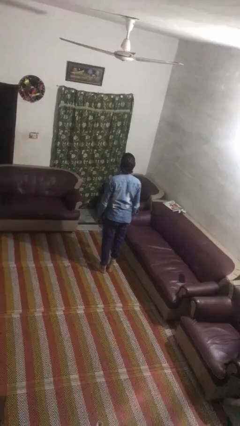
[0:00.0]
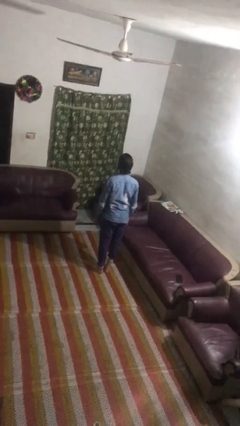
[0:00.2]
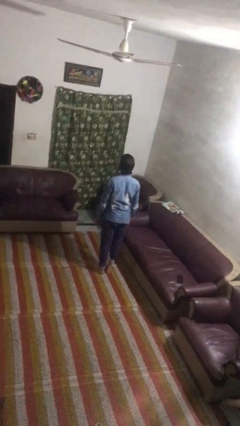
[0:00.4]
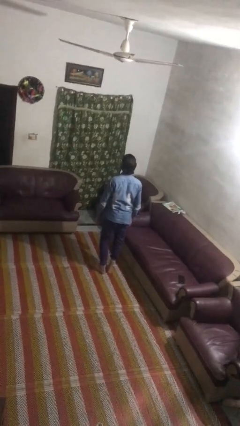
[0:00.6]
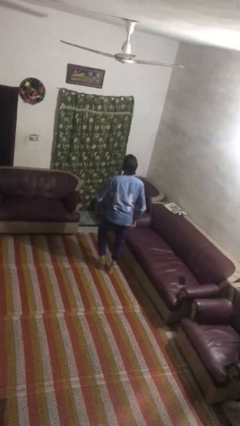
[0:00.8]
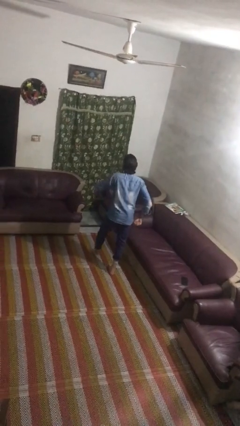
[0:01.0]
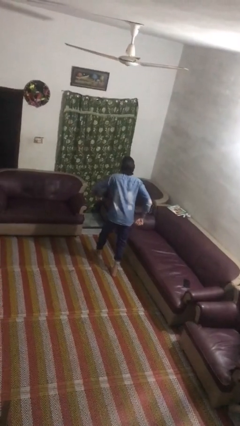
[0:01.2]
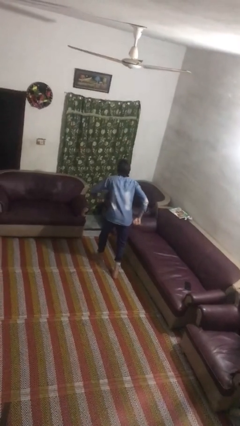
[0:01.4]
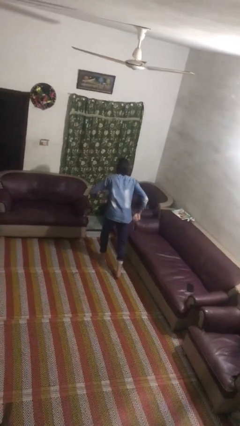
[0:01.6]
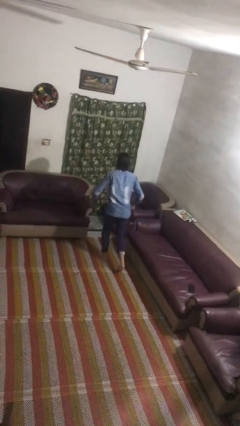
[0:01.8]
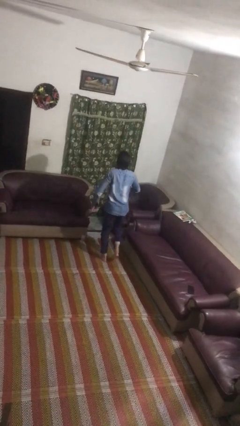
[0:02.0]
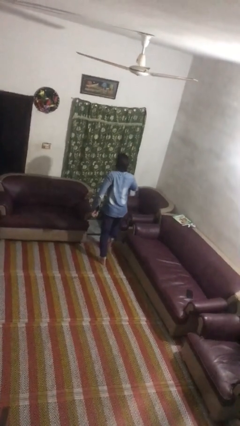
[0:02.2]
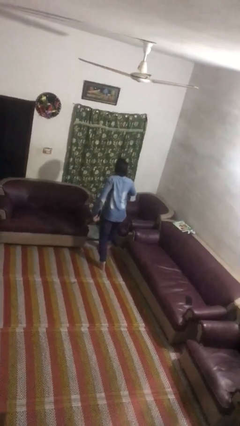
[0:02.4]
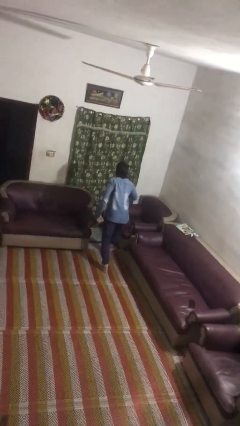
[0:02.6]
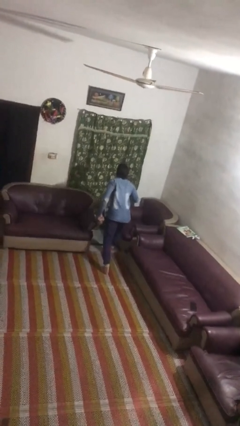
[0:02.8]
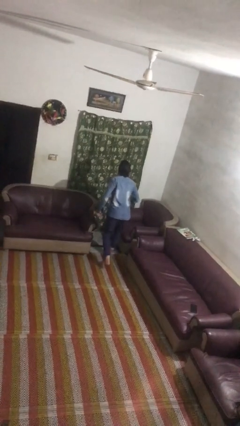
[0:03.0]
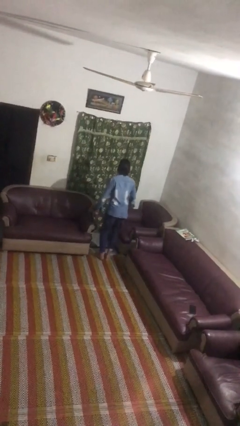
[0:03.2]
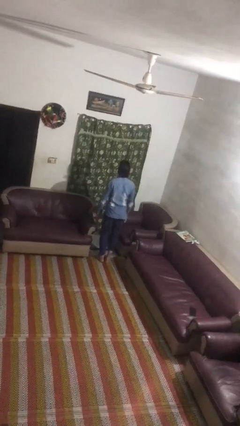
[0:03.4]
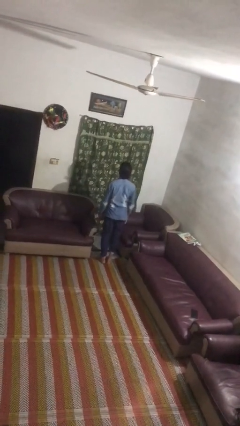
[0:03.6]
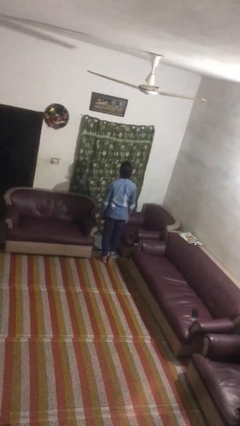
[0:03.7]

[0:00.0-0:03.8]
person walks tiptoe

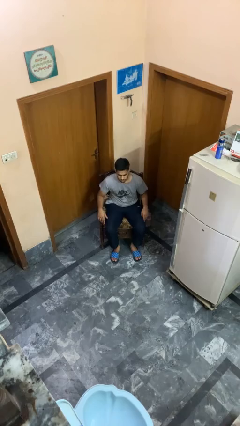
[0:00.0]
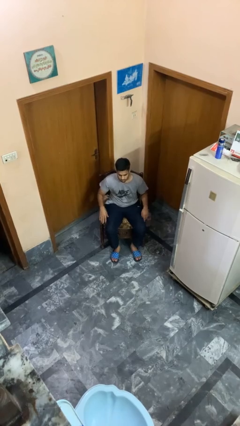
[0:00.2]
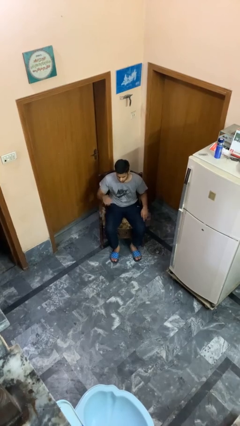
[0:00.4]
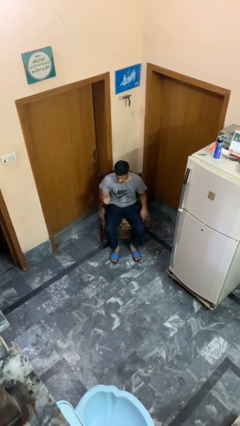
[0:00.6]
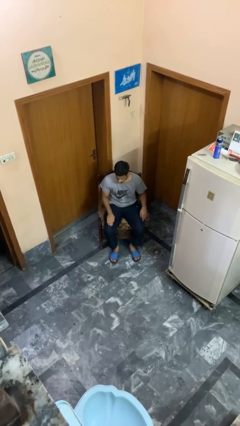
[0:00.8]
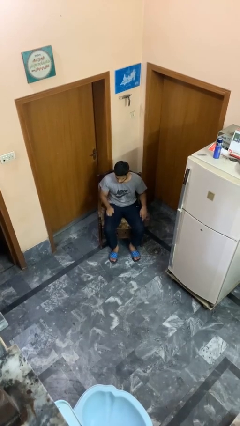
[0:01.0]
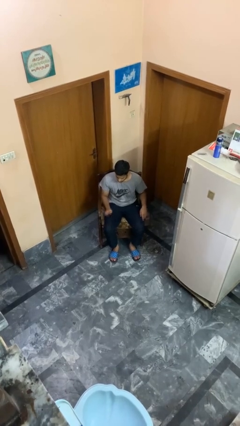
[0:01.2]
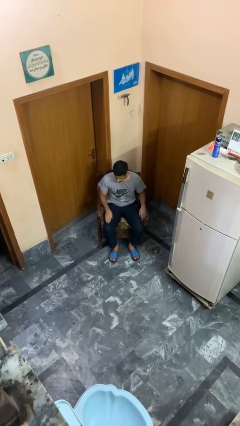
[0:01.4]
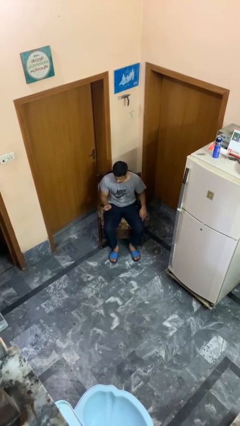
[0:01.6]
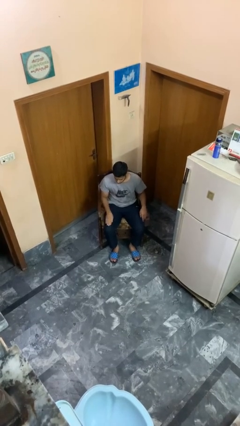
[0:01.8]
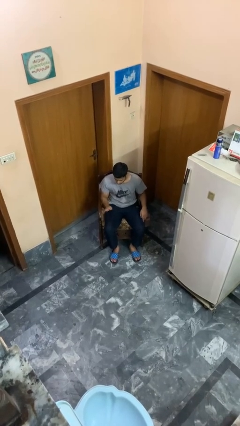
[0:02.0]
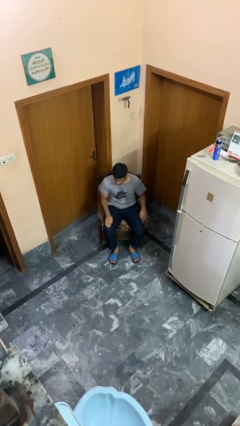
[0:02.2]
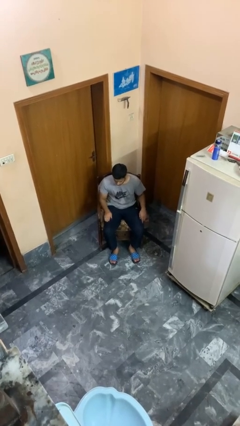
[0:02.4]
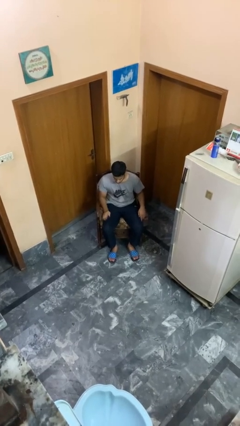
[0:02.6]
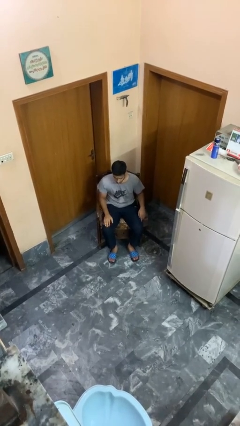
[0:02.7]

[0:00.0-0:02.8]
person slaps hands on thighs

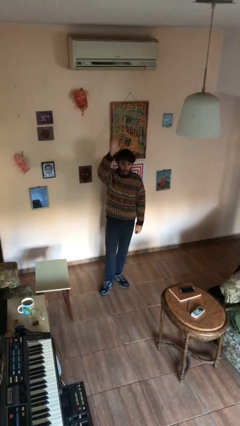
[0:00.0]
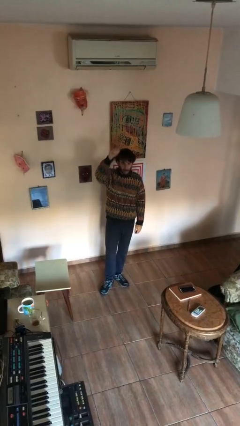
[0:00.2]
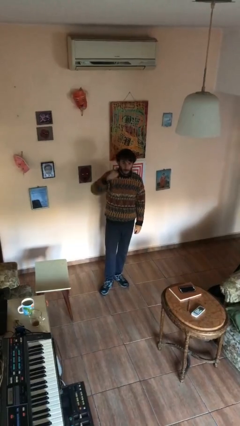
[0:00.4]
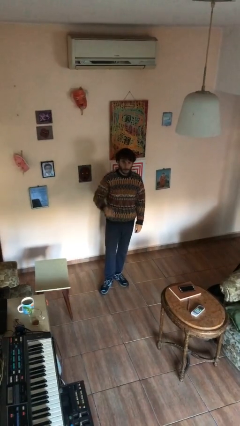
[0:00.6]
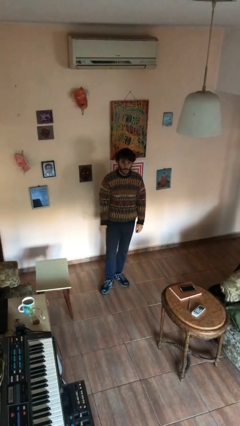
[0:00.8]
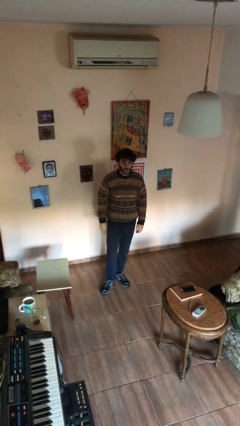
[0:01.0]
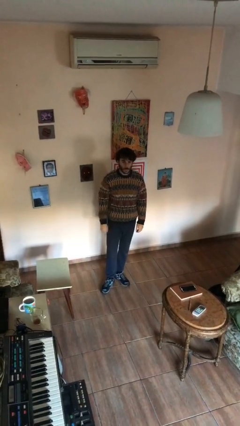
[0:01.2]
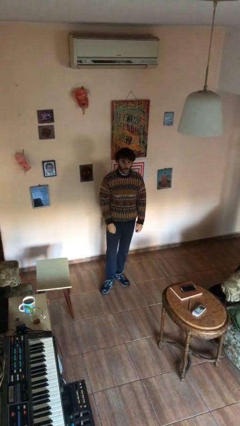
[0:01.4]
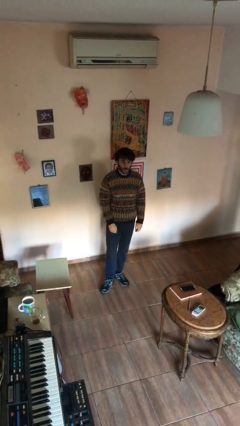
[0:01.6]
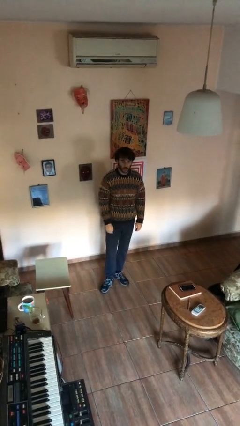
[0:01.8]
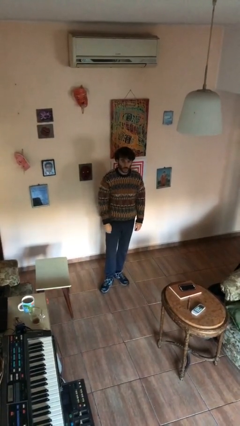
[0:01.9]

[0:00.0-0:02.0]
person gestures lower hand

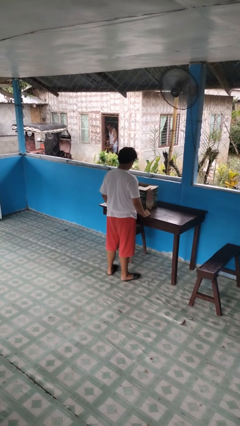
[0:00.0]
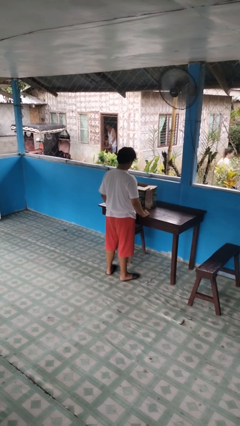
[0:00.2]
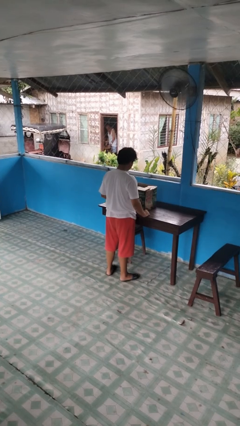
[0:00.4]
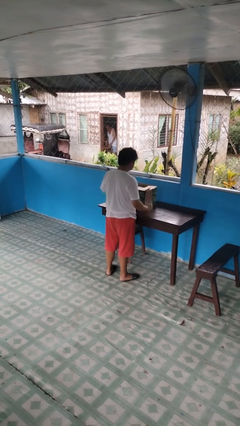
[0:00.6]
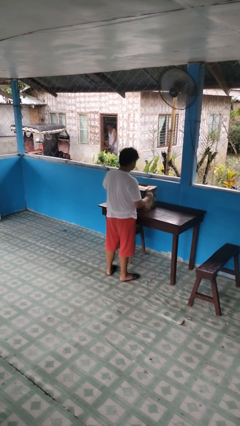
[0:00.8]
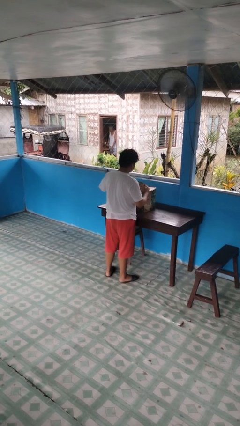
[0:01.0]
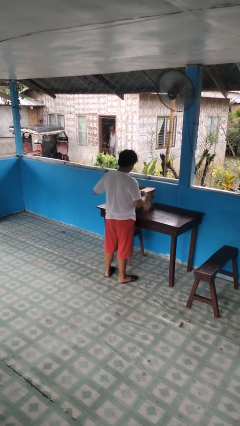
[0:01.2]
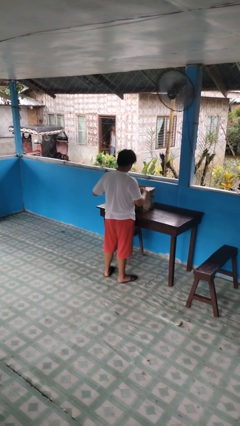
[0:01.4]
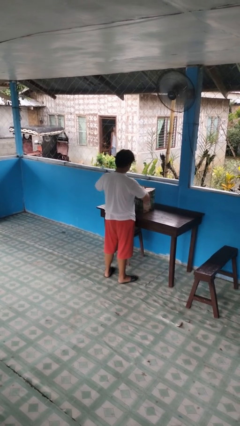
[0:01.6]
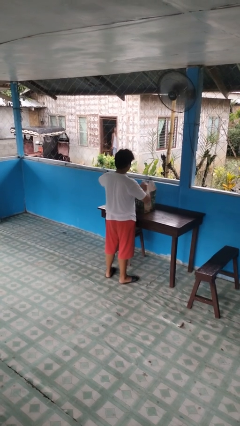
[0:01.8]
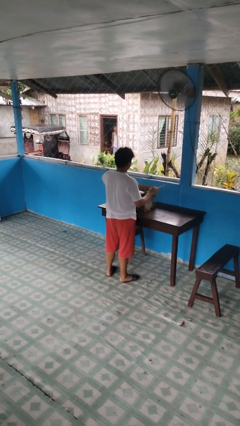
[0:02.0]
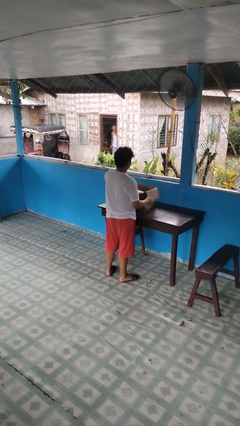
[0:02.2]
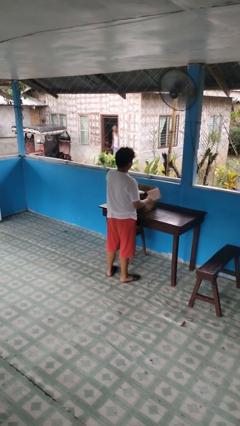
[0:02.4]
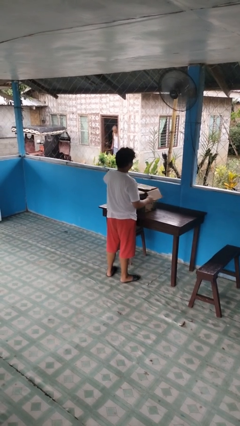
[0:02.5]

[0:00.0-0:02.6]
person opens box

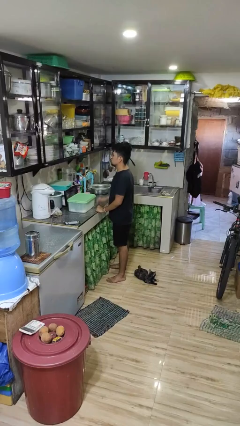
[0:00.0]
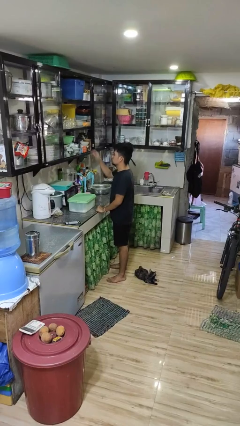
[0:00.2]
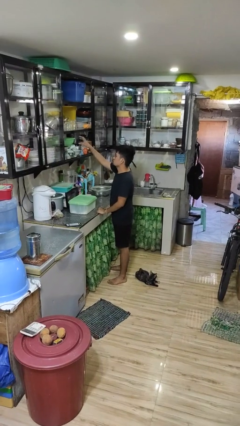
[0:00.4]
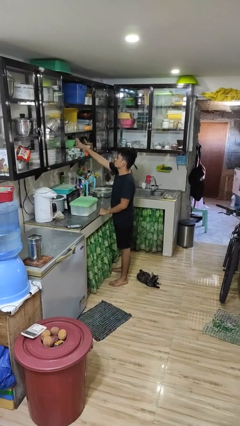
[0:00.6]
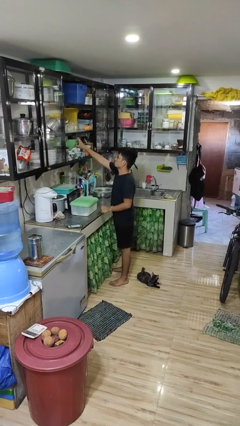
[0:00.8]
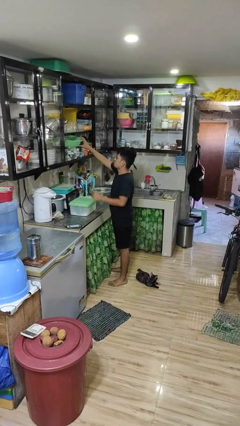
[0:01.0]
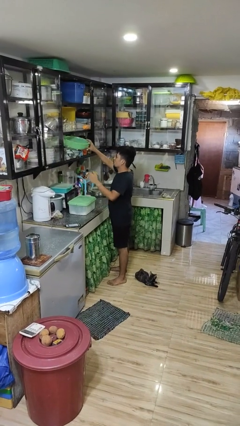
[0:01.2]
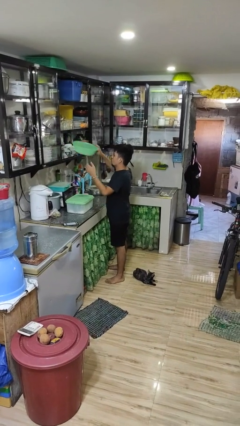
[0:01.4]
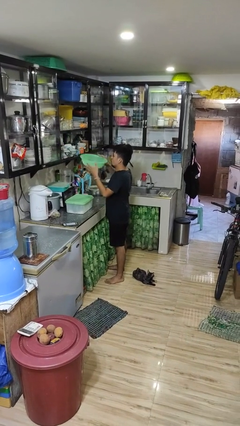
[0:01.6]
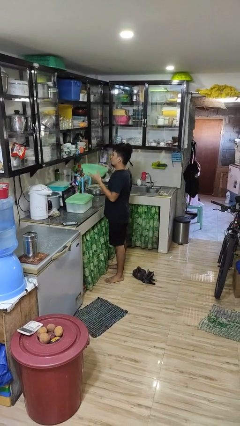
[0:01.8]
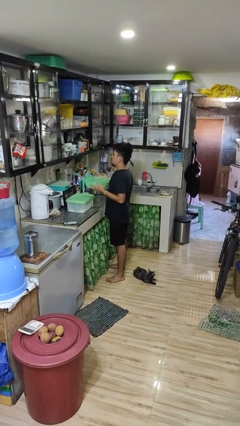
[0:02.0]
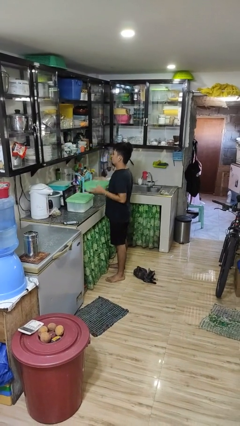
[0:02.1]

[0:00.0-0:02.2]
person picks up object from cabinet

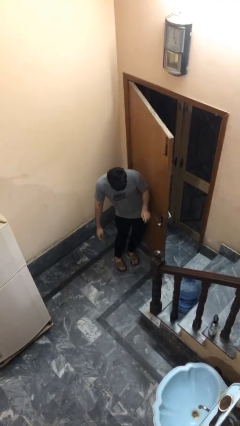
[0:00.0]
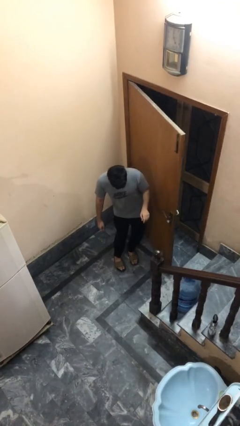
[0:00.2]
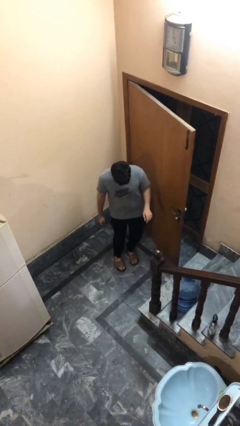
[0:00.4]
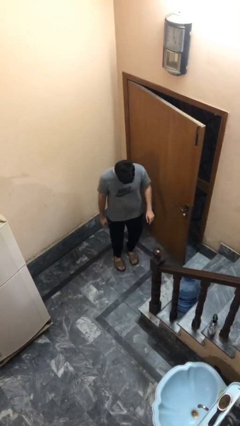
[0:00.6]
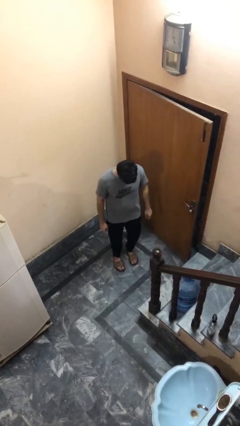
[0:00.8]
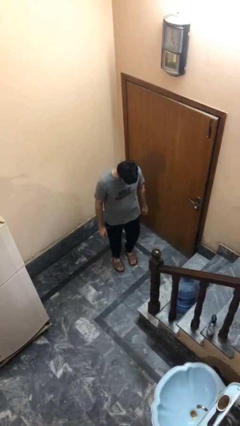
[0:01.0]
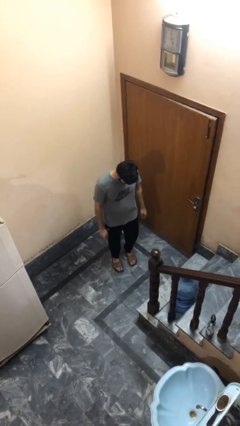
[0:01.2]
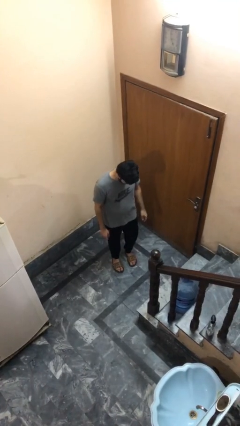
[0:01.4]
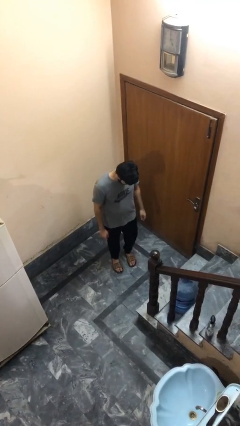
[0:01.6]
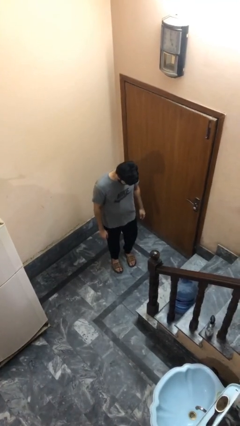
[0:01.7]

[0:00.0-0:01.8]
person closes door with hip

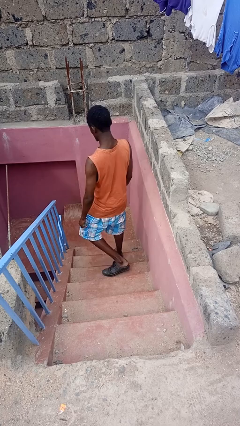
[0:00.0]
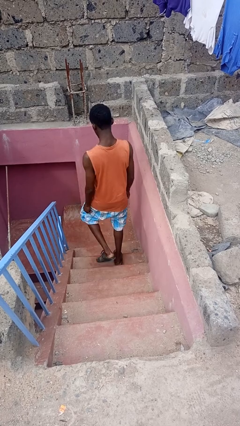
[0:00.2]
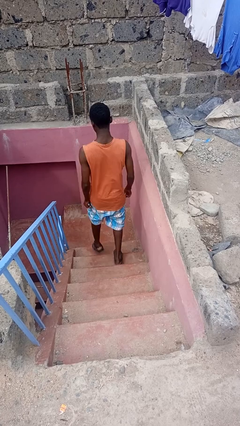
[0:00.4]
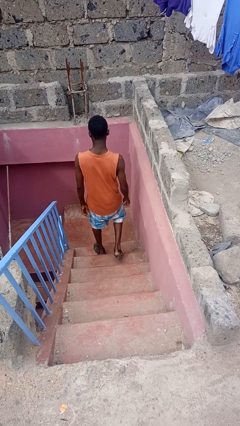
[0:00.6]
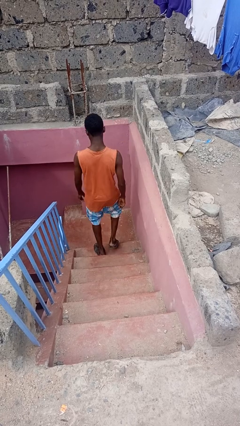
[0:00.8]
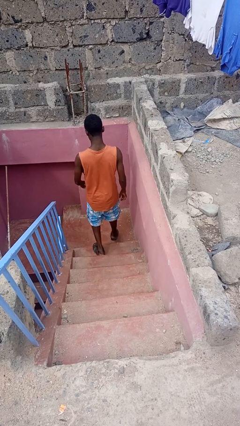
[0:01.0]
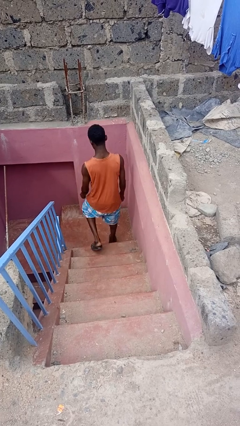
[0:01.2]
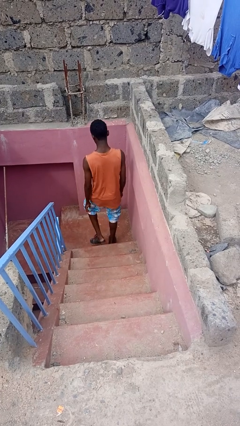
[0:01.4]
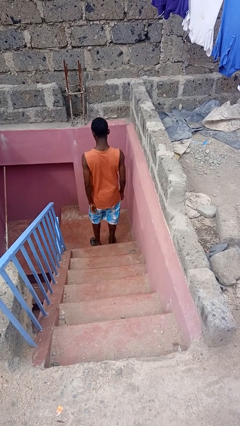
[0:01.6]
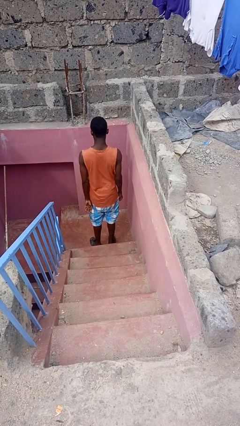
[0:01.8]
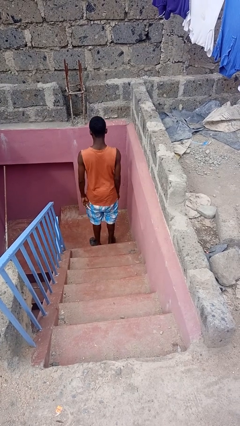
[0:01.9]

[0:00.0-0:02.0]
person climbs down stairs
